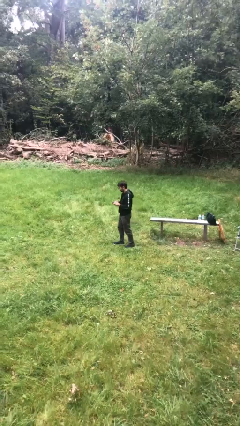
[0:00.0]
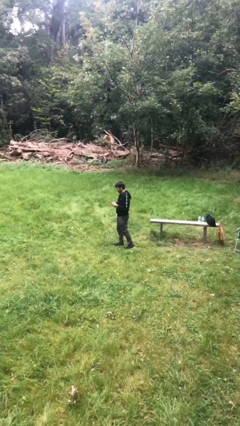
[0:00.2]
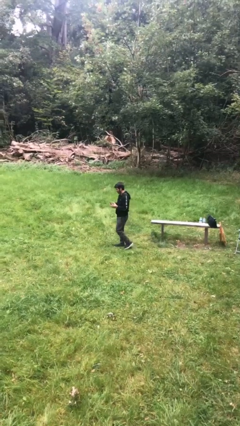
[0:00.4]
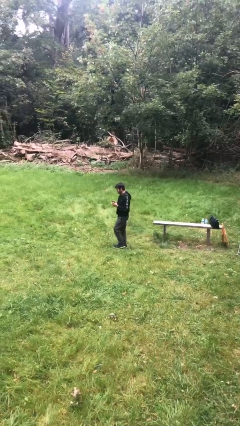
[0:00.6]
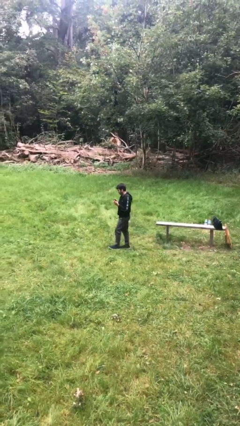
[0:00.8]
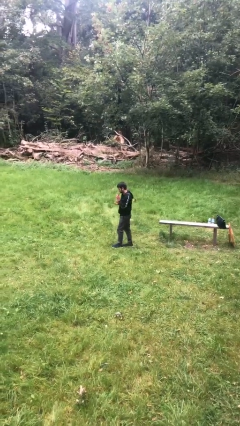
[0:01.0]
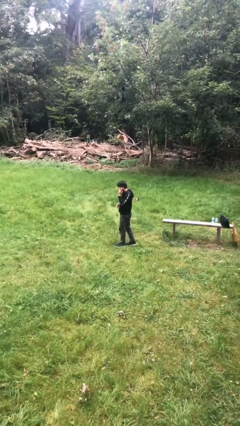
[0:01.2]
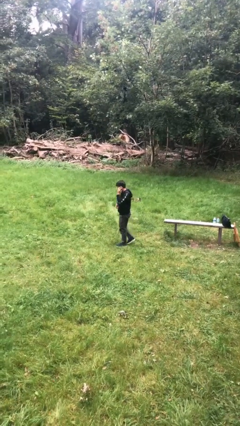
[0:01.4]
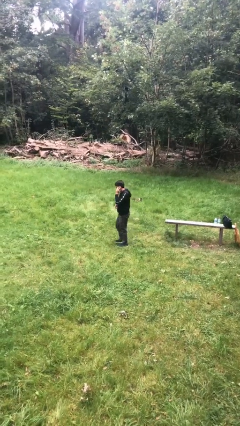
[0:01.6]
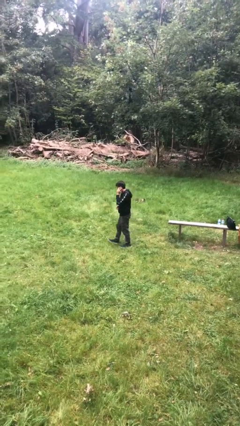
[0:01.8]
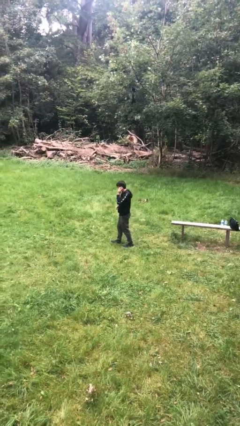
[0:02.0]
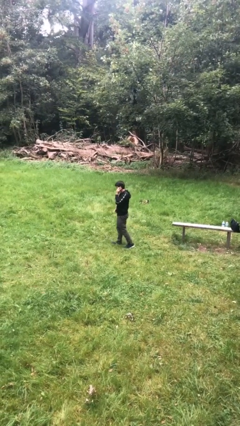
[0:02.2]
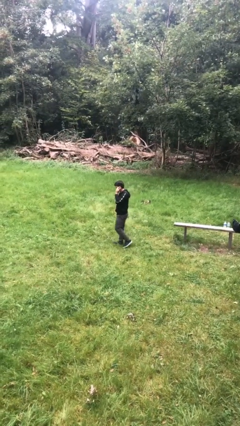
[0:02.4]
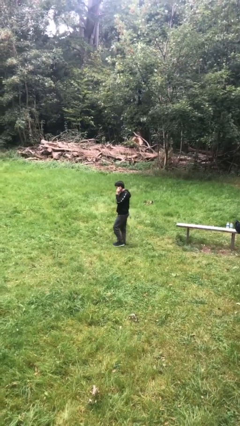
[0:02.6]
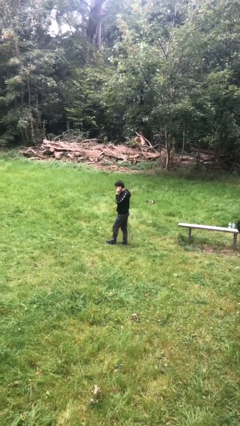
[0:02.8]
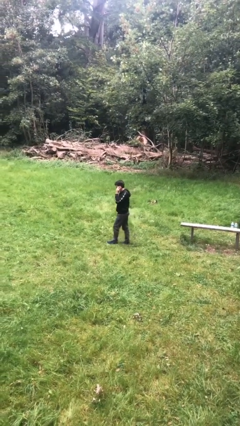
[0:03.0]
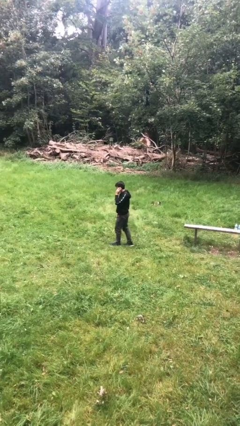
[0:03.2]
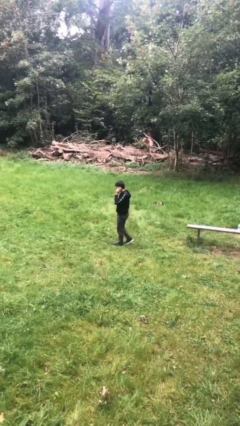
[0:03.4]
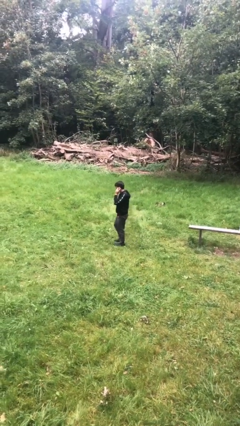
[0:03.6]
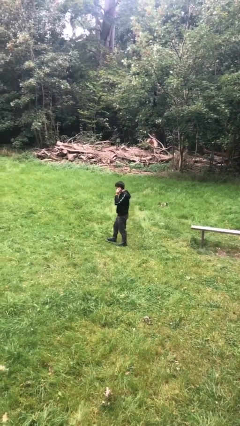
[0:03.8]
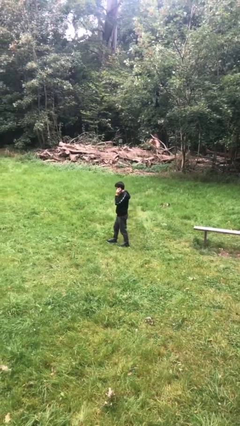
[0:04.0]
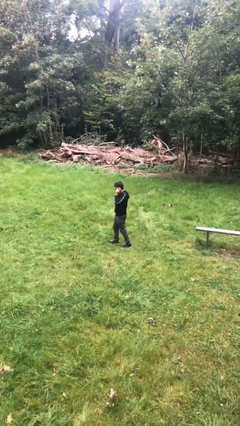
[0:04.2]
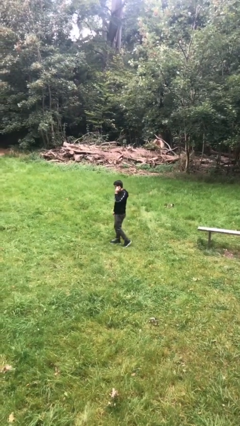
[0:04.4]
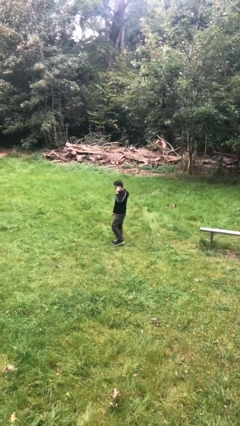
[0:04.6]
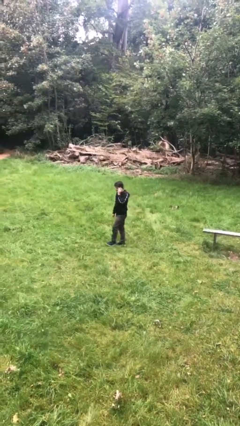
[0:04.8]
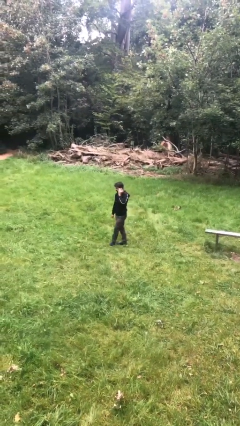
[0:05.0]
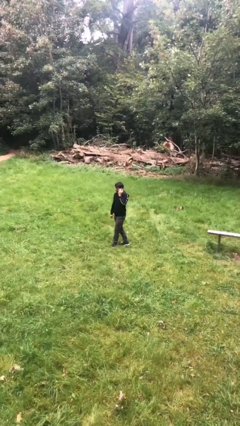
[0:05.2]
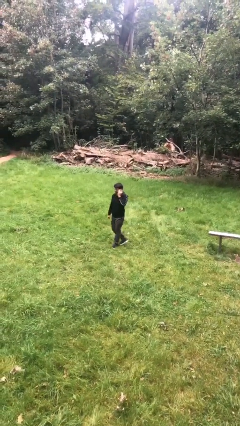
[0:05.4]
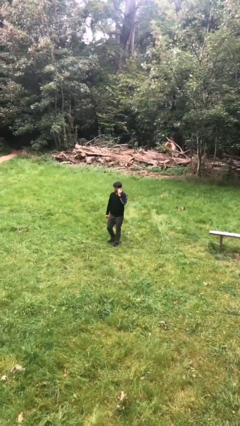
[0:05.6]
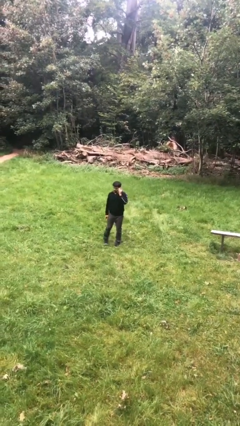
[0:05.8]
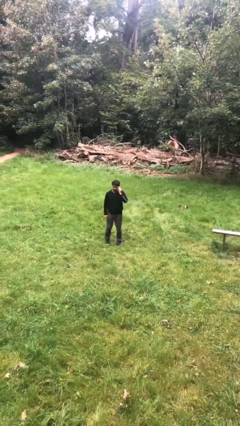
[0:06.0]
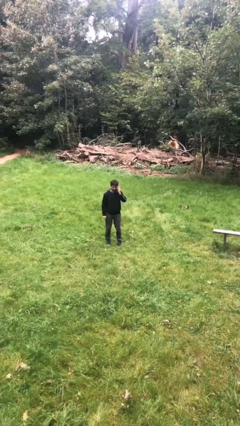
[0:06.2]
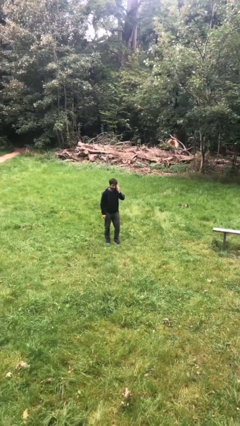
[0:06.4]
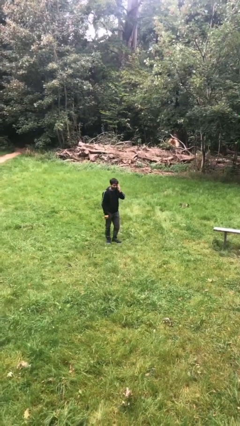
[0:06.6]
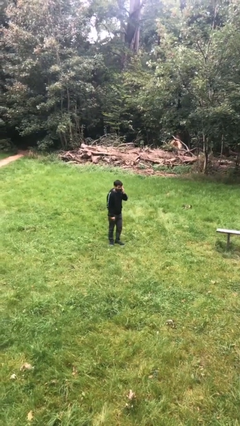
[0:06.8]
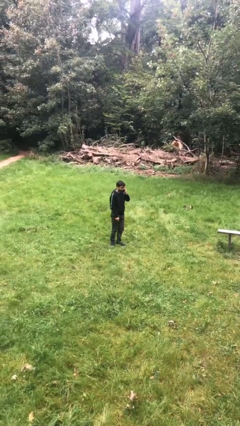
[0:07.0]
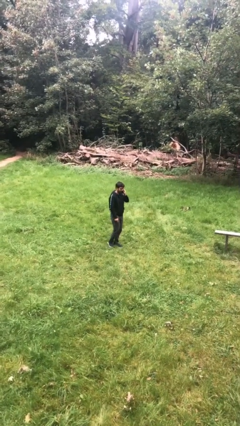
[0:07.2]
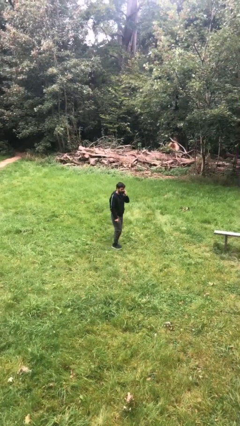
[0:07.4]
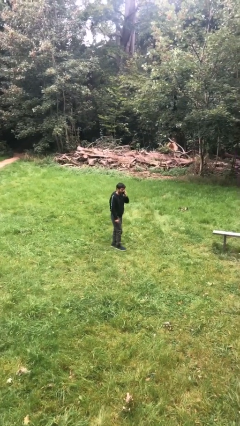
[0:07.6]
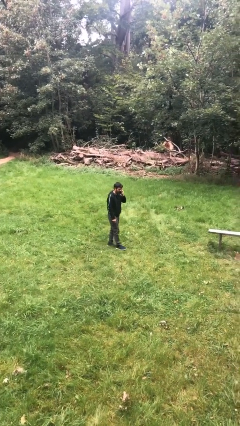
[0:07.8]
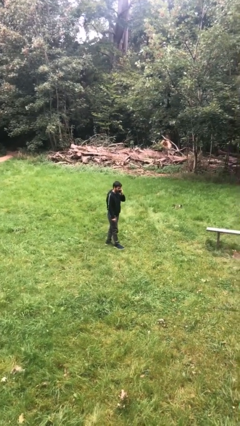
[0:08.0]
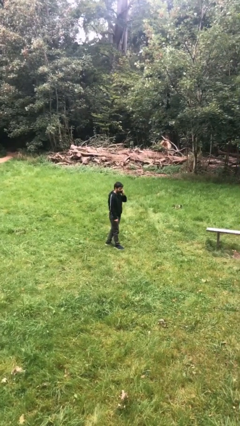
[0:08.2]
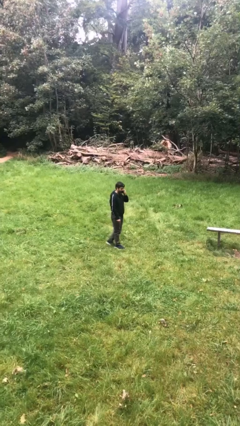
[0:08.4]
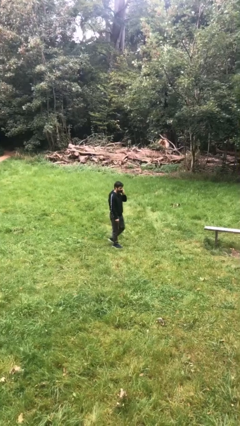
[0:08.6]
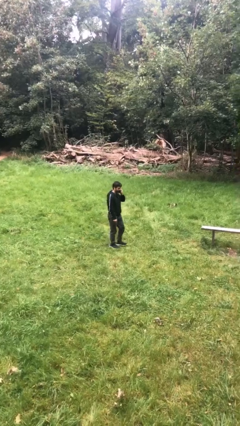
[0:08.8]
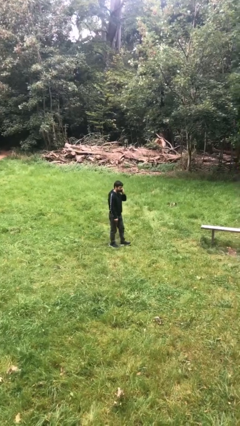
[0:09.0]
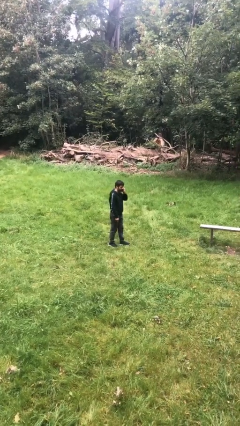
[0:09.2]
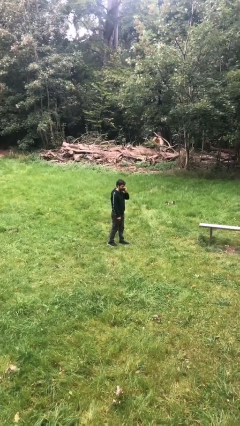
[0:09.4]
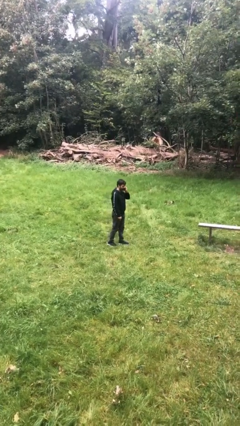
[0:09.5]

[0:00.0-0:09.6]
person talks on phone

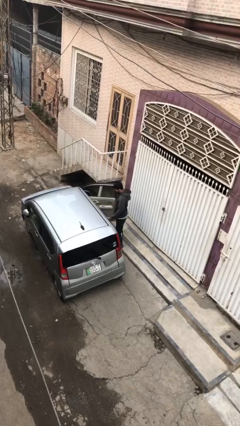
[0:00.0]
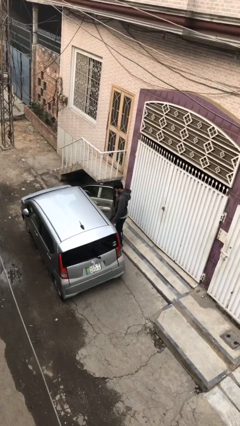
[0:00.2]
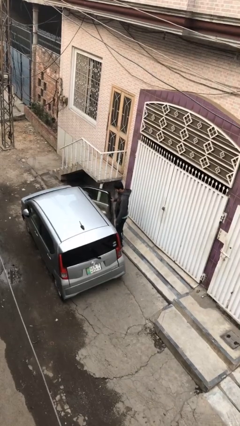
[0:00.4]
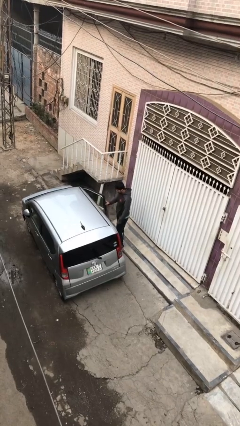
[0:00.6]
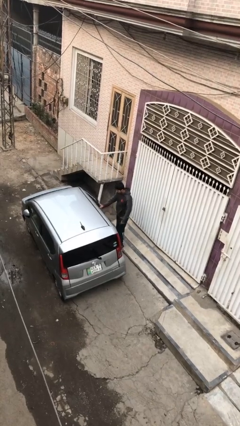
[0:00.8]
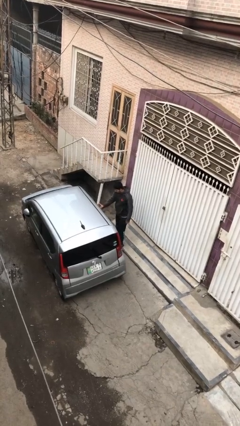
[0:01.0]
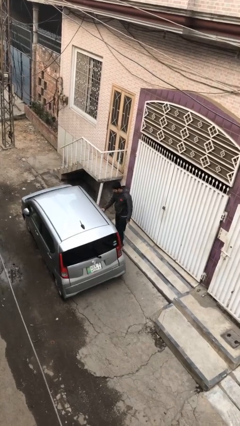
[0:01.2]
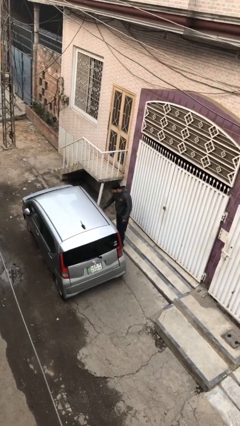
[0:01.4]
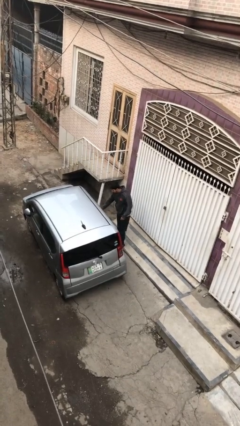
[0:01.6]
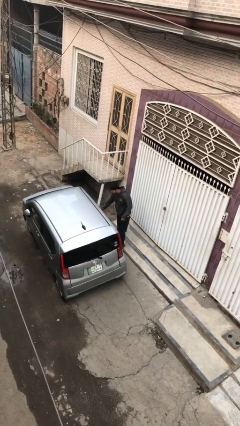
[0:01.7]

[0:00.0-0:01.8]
person closes car door

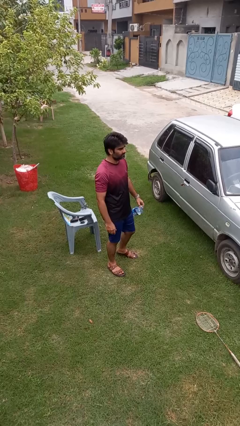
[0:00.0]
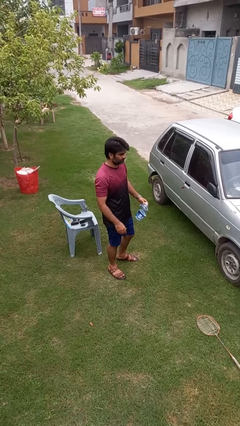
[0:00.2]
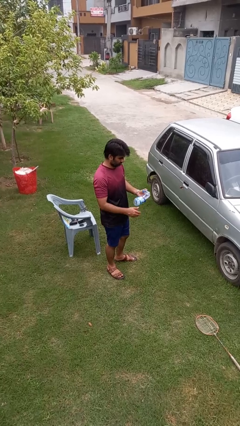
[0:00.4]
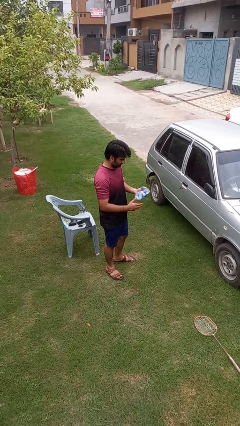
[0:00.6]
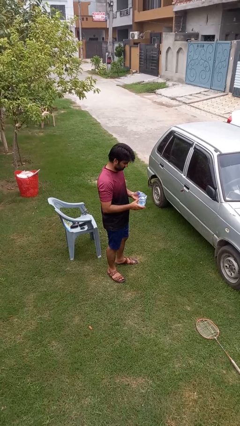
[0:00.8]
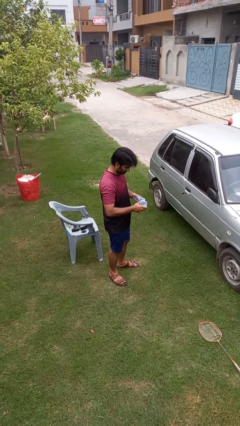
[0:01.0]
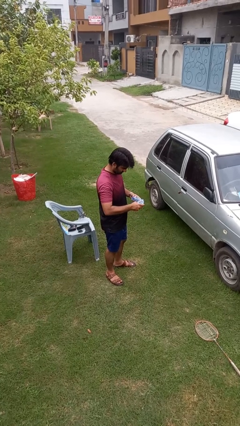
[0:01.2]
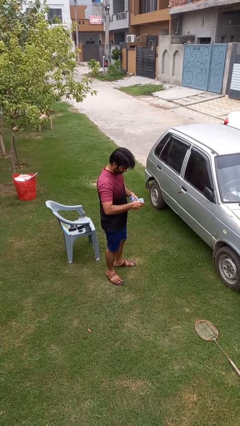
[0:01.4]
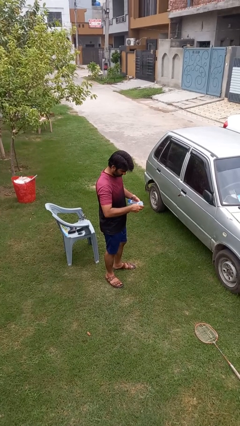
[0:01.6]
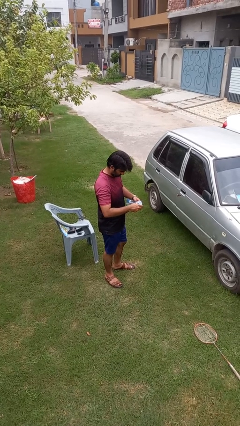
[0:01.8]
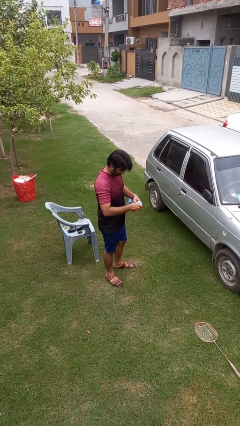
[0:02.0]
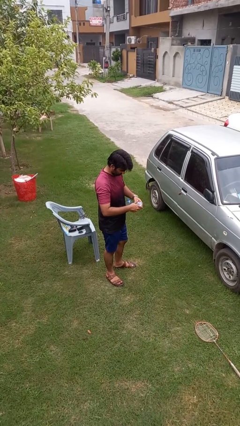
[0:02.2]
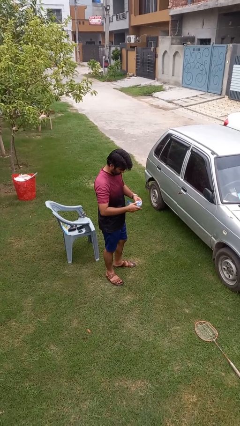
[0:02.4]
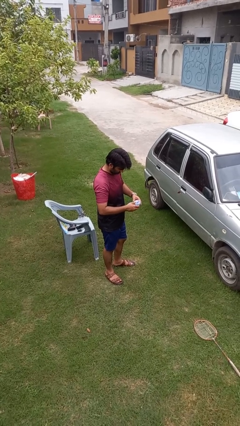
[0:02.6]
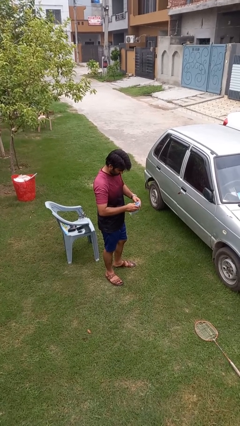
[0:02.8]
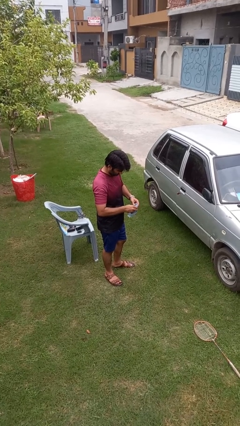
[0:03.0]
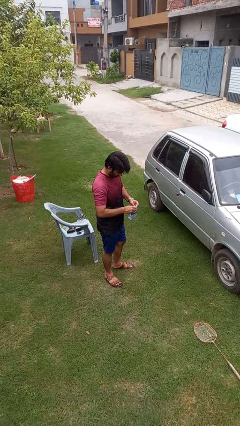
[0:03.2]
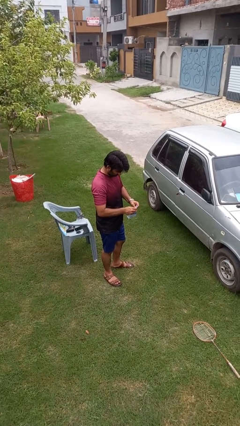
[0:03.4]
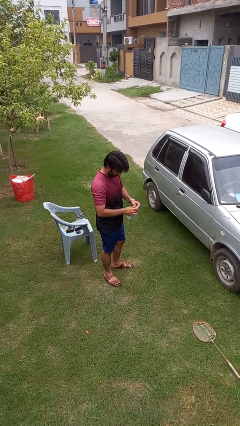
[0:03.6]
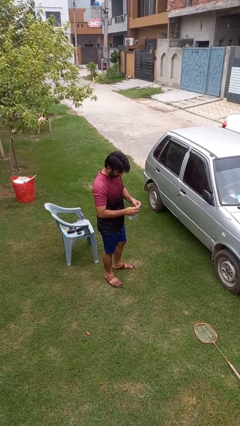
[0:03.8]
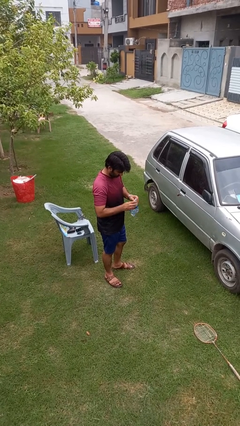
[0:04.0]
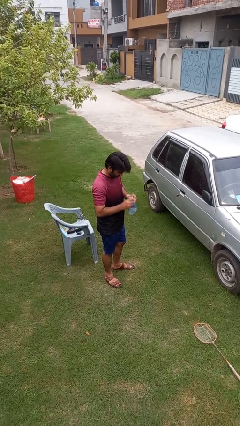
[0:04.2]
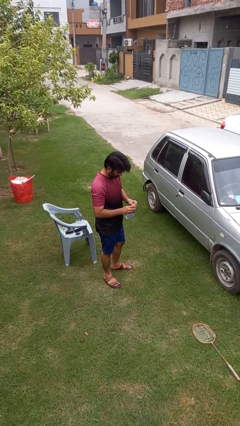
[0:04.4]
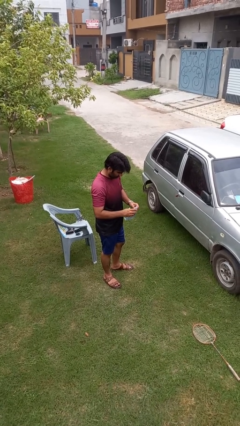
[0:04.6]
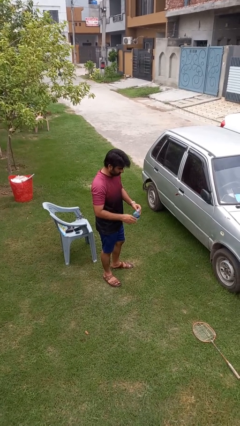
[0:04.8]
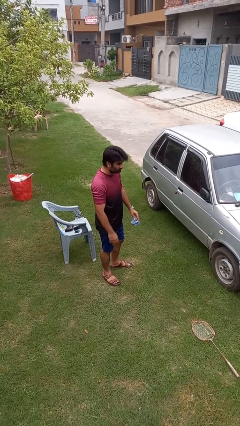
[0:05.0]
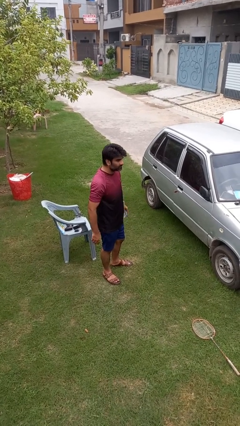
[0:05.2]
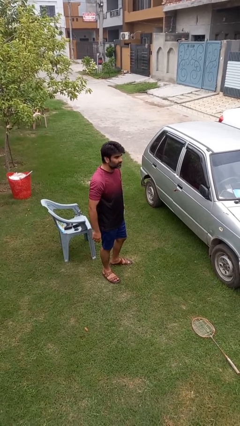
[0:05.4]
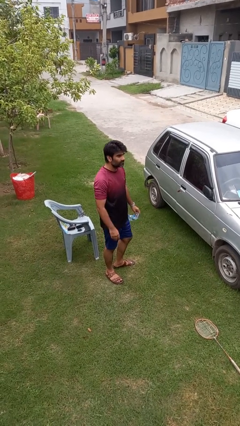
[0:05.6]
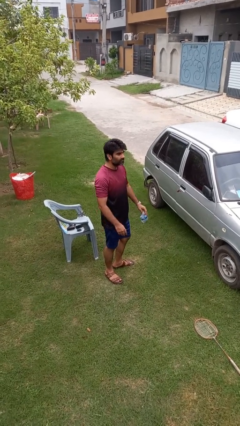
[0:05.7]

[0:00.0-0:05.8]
person squeezes object

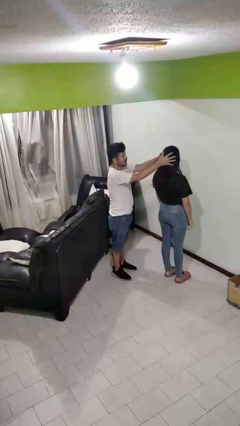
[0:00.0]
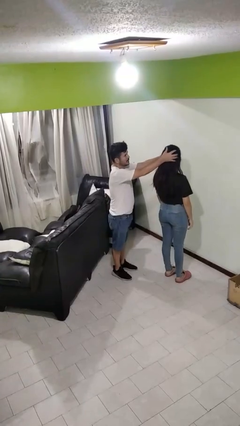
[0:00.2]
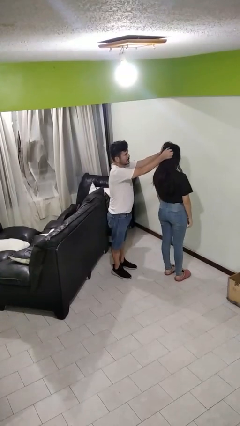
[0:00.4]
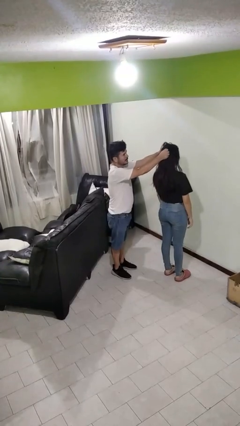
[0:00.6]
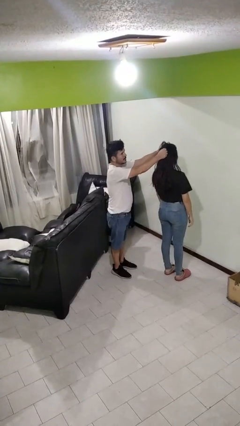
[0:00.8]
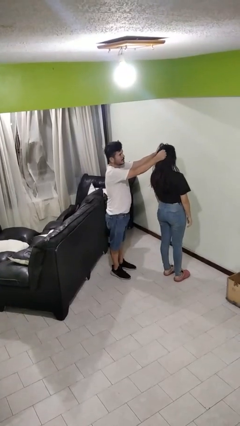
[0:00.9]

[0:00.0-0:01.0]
person grabs person by hair
